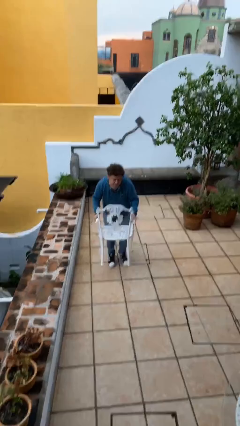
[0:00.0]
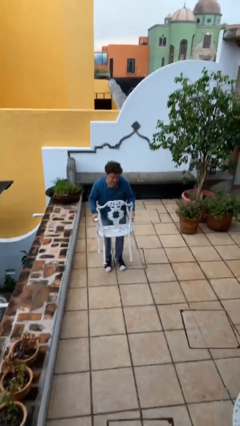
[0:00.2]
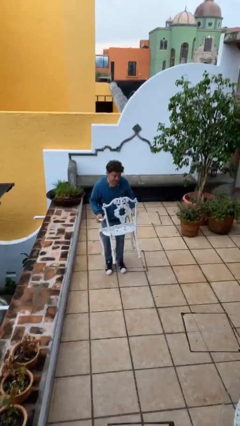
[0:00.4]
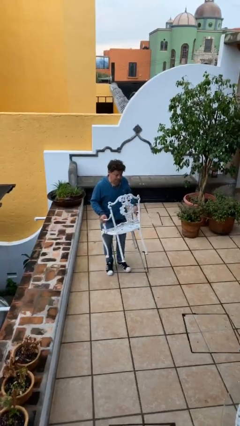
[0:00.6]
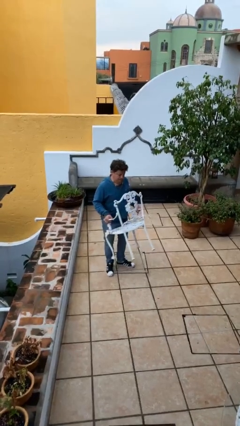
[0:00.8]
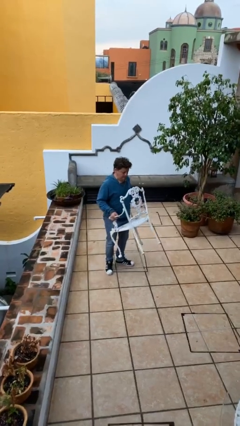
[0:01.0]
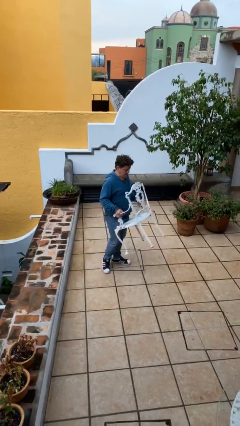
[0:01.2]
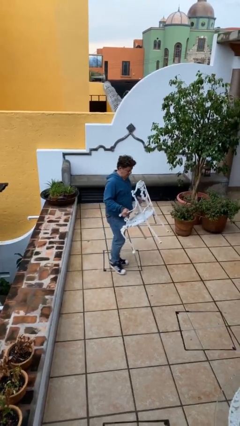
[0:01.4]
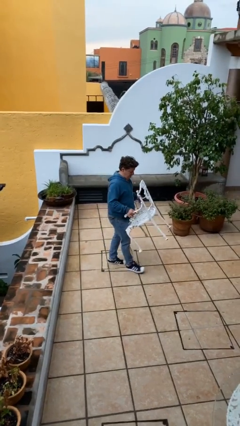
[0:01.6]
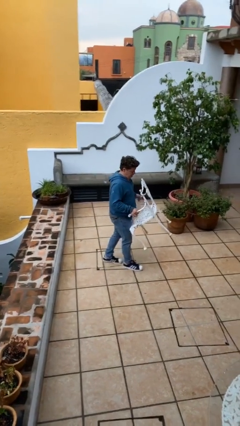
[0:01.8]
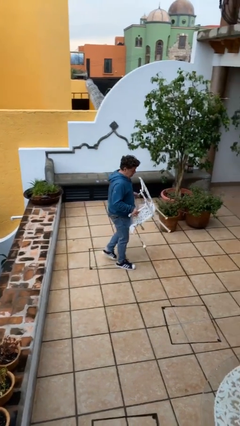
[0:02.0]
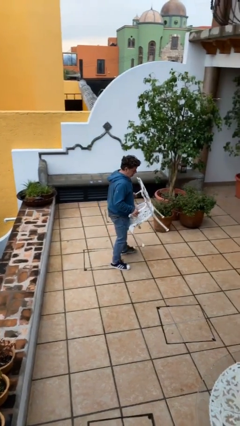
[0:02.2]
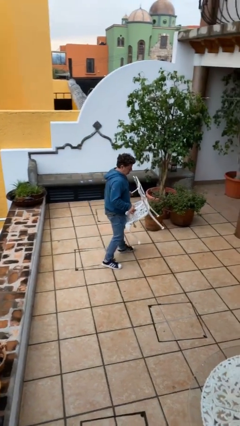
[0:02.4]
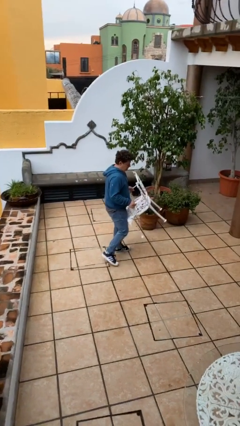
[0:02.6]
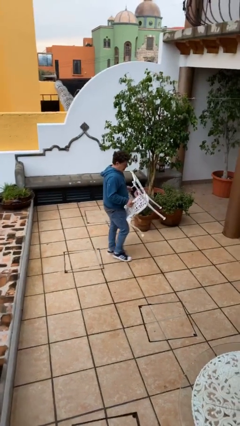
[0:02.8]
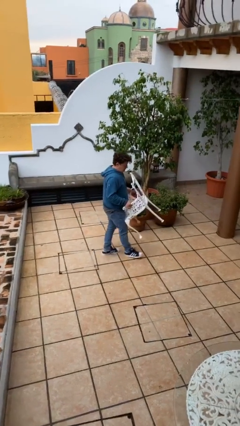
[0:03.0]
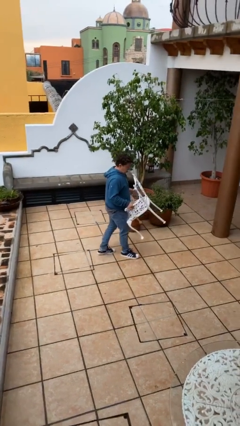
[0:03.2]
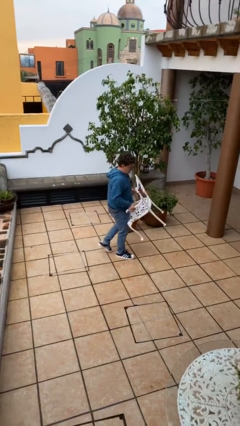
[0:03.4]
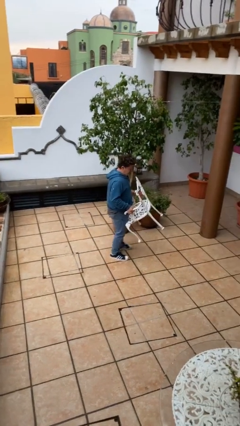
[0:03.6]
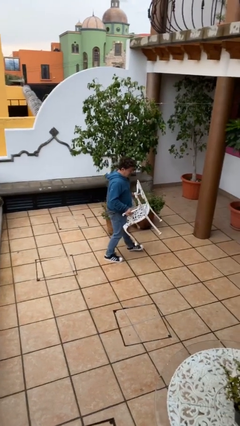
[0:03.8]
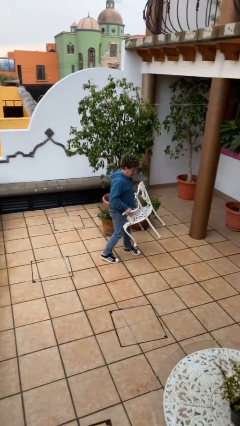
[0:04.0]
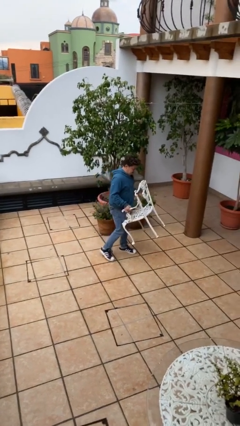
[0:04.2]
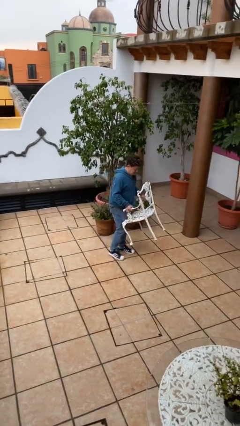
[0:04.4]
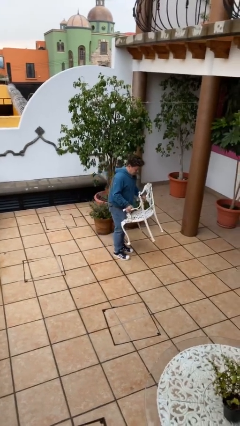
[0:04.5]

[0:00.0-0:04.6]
person carries heavy object

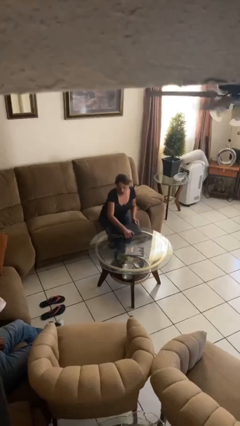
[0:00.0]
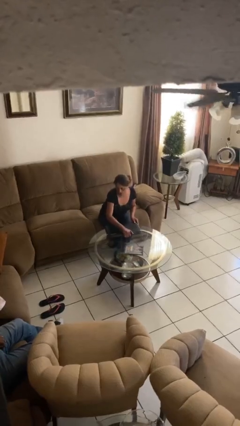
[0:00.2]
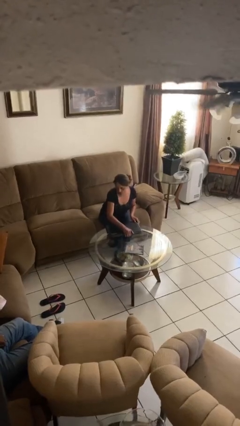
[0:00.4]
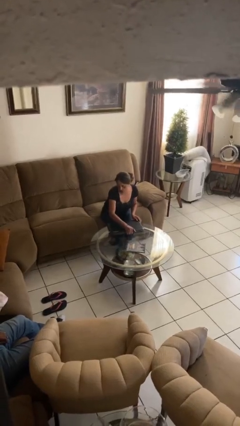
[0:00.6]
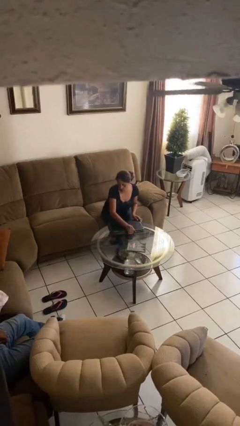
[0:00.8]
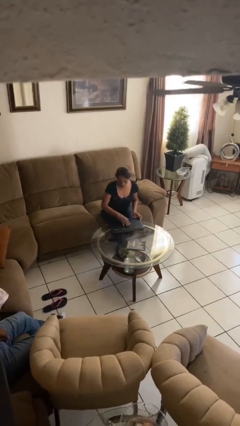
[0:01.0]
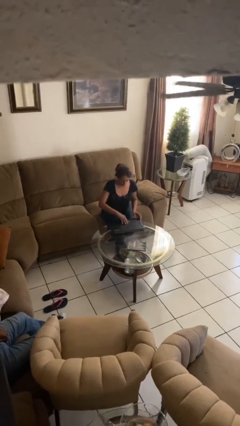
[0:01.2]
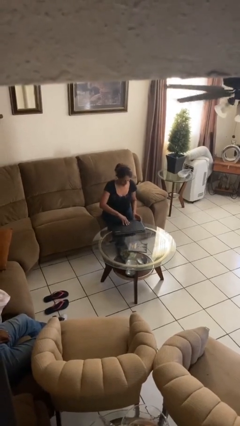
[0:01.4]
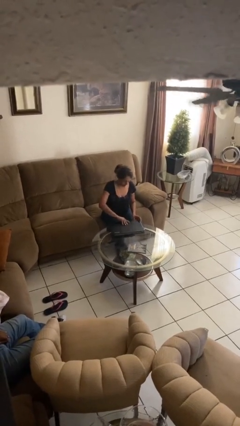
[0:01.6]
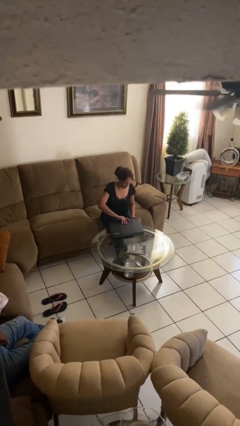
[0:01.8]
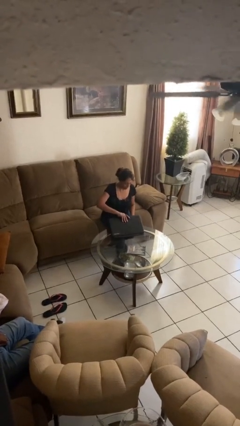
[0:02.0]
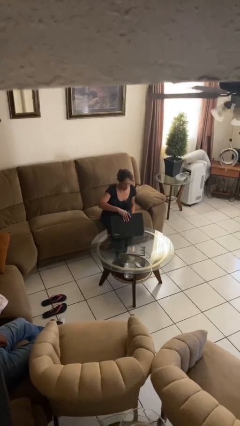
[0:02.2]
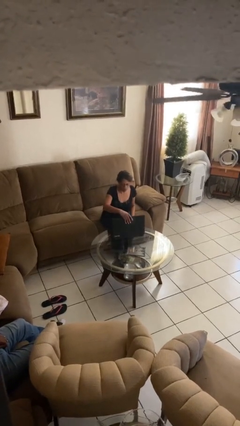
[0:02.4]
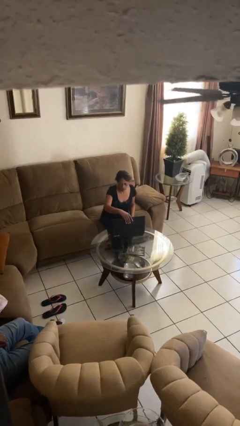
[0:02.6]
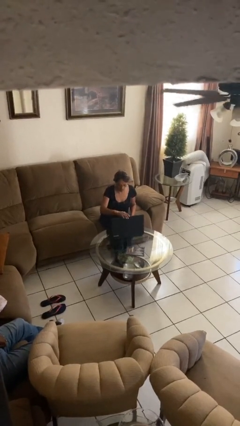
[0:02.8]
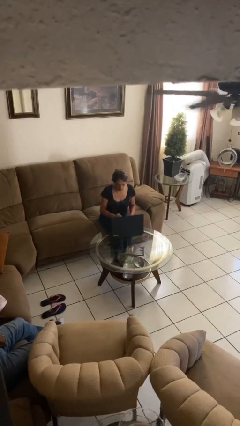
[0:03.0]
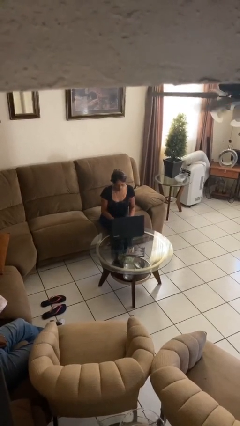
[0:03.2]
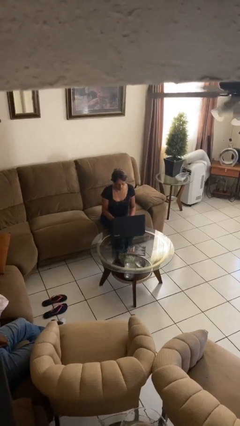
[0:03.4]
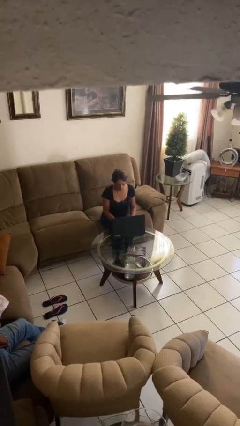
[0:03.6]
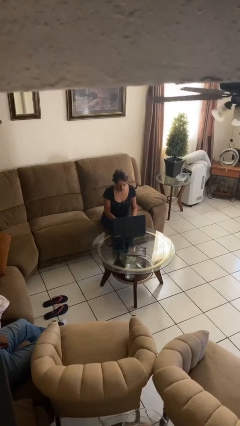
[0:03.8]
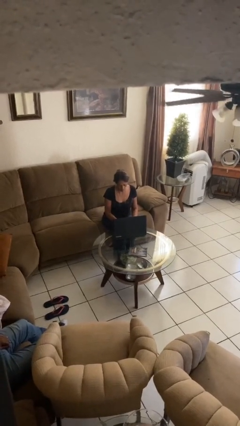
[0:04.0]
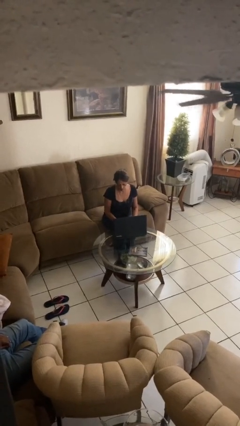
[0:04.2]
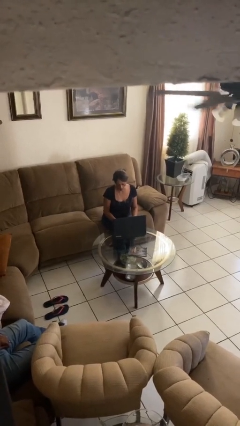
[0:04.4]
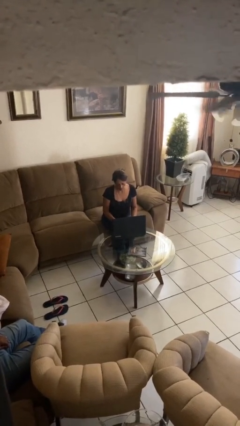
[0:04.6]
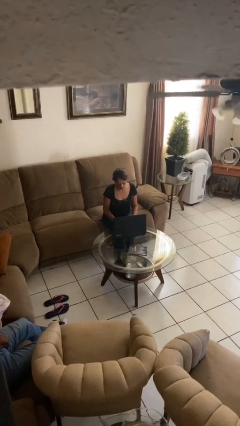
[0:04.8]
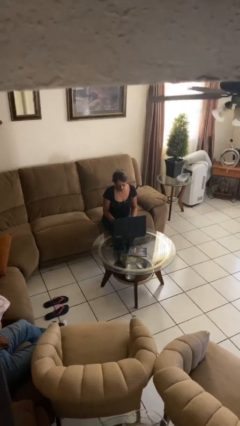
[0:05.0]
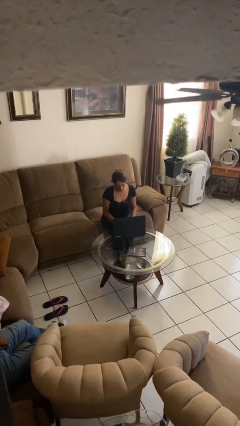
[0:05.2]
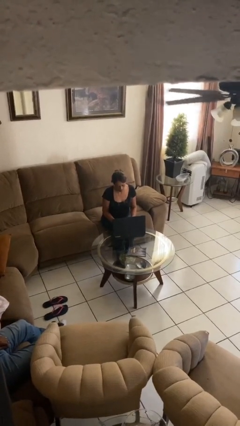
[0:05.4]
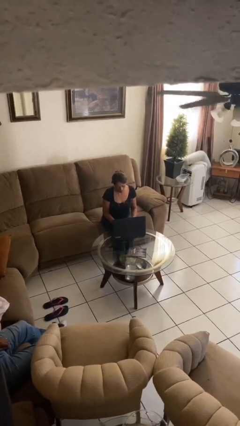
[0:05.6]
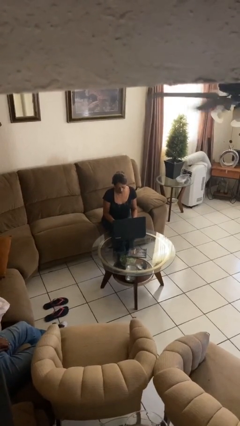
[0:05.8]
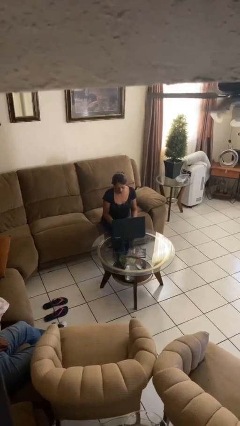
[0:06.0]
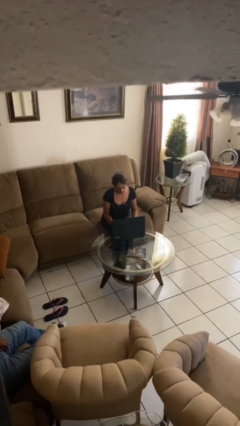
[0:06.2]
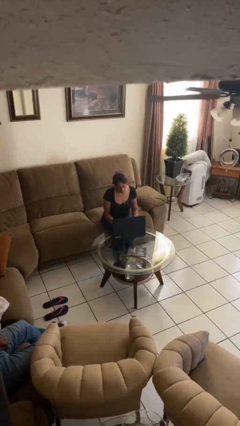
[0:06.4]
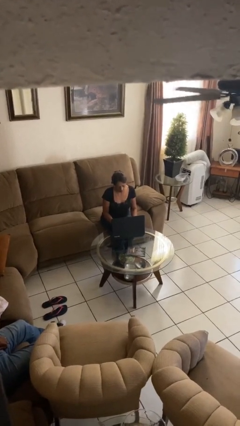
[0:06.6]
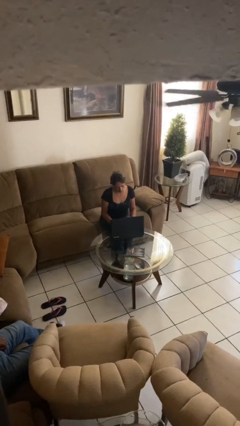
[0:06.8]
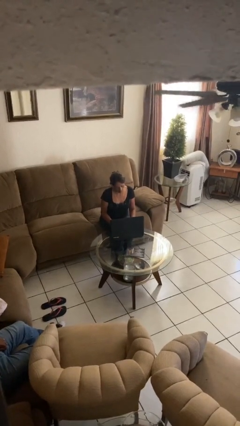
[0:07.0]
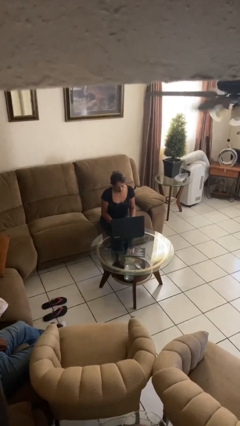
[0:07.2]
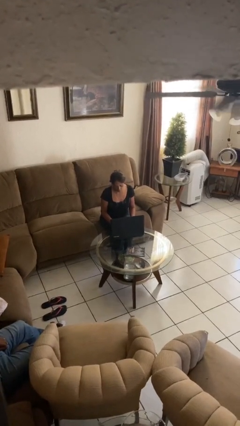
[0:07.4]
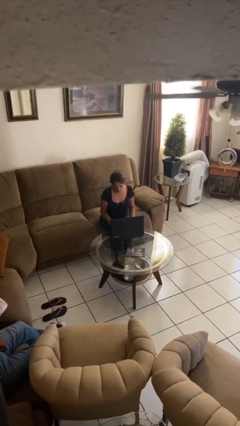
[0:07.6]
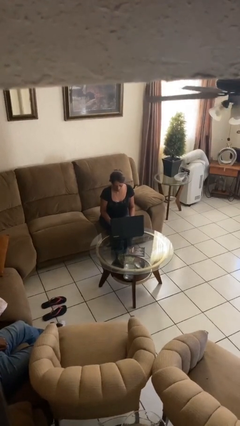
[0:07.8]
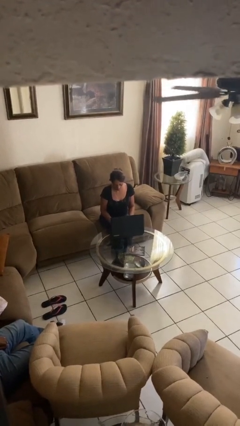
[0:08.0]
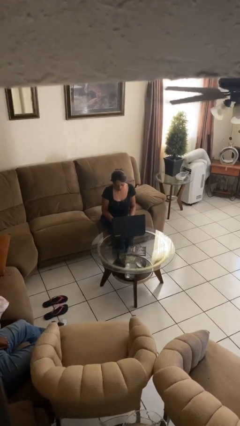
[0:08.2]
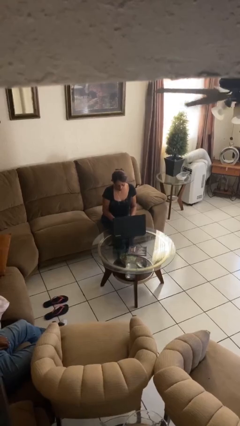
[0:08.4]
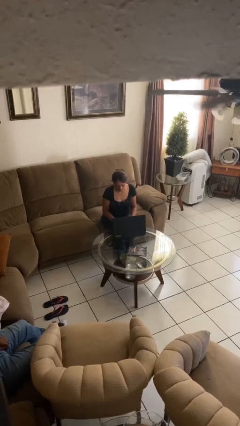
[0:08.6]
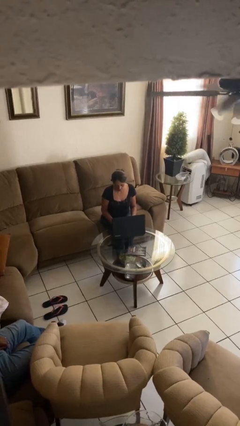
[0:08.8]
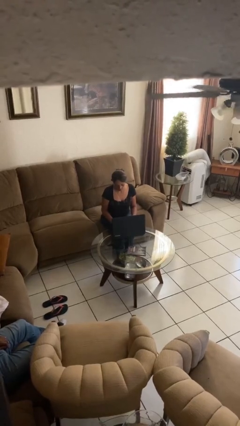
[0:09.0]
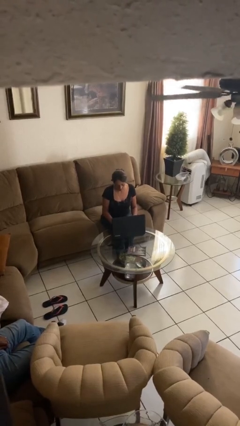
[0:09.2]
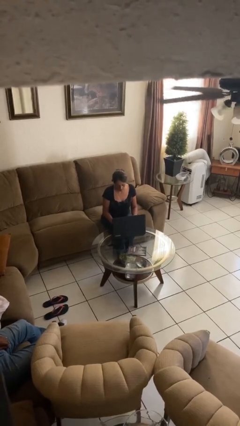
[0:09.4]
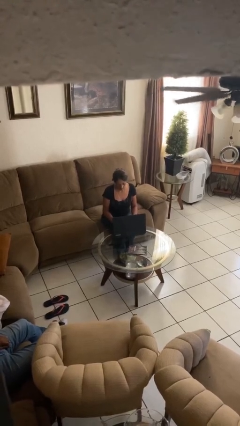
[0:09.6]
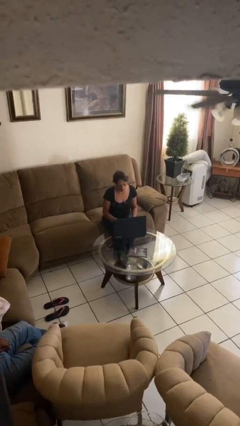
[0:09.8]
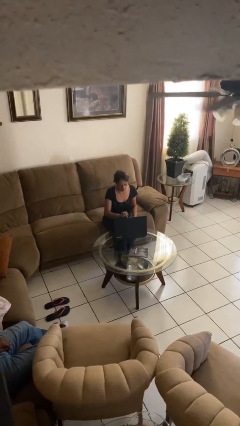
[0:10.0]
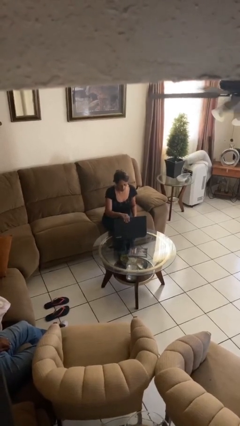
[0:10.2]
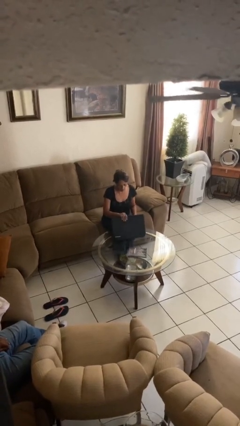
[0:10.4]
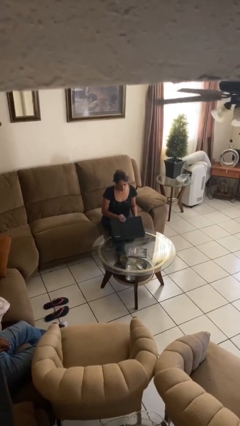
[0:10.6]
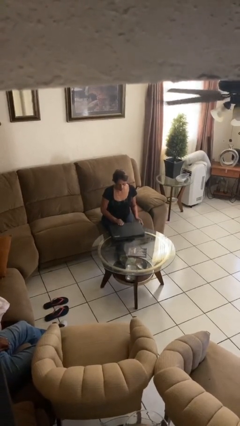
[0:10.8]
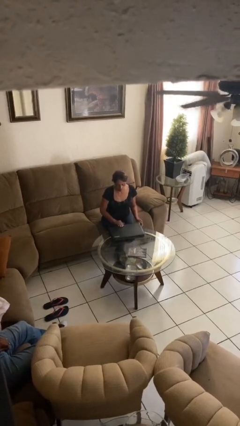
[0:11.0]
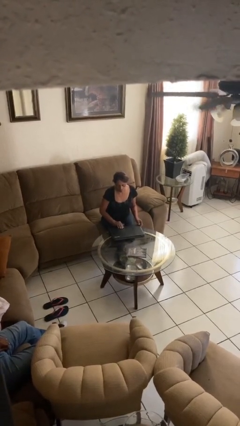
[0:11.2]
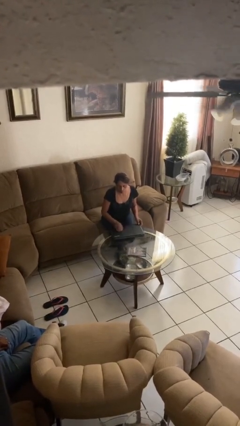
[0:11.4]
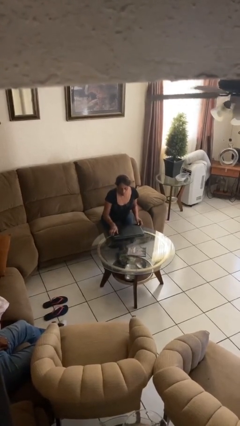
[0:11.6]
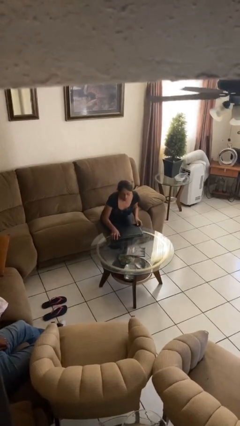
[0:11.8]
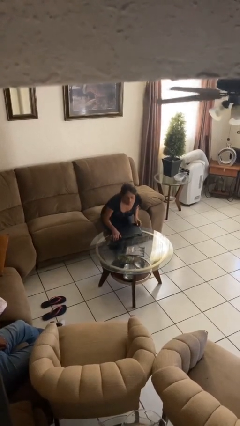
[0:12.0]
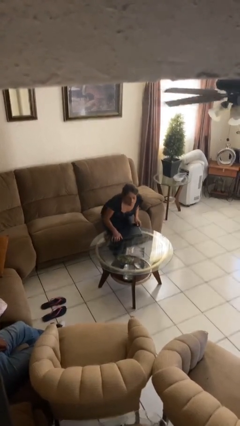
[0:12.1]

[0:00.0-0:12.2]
person interacts with laptop

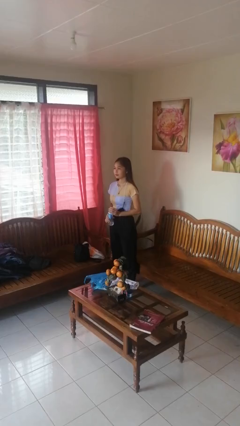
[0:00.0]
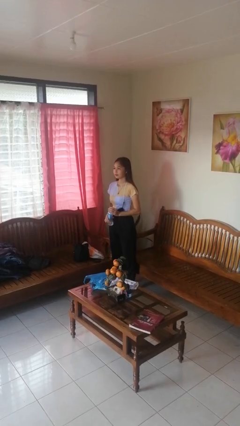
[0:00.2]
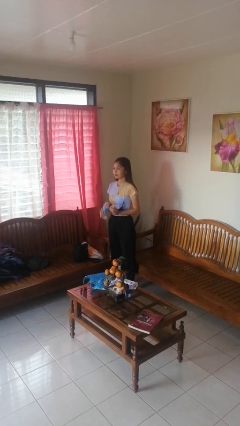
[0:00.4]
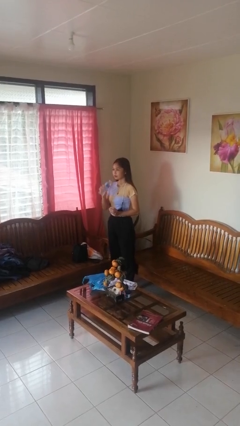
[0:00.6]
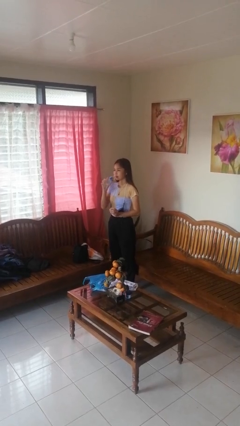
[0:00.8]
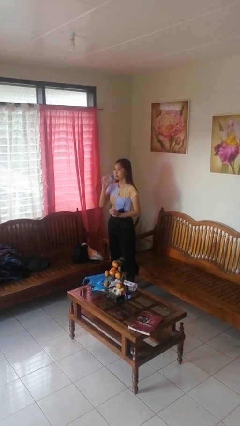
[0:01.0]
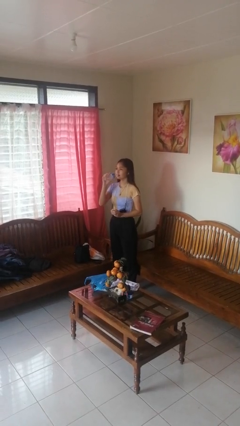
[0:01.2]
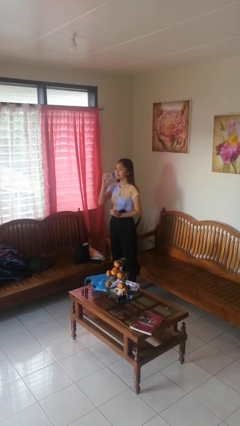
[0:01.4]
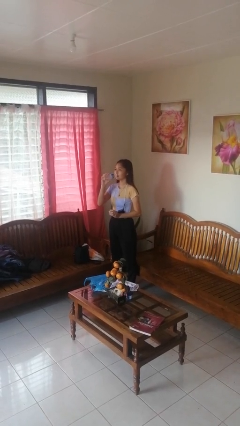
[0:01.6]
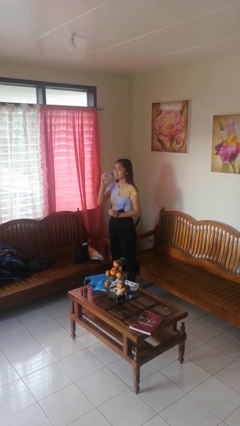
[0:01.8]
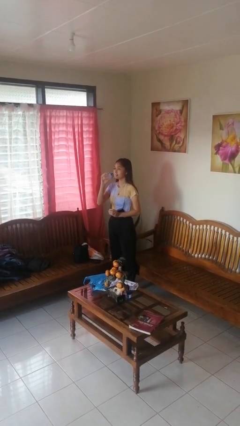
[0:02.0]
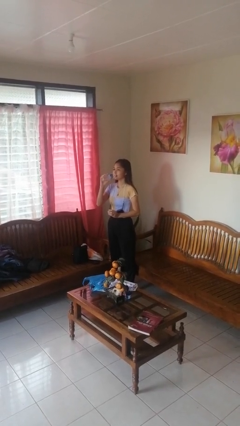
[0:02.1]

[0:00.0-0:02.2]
person drinks from bottle
